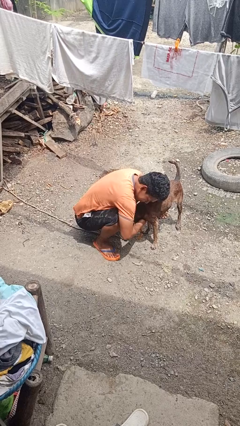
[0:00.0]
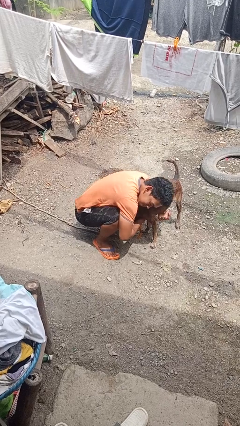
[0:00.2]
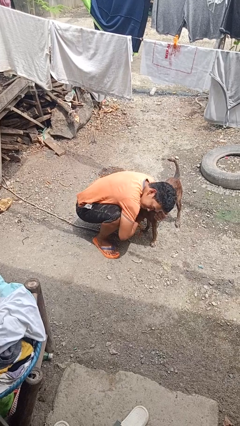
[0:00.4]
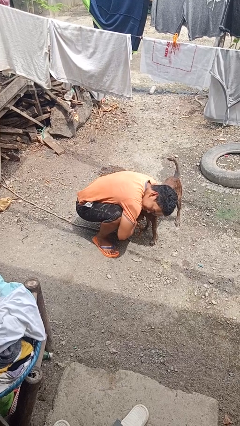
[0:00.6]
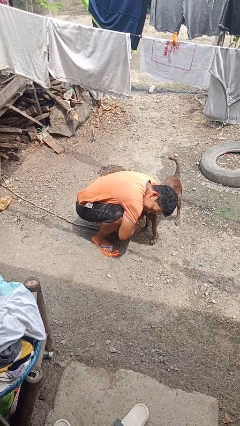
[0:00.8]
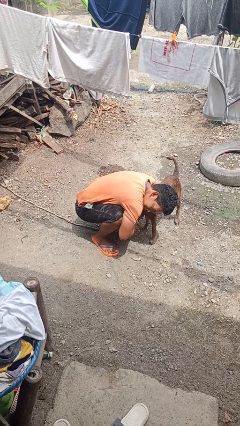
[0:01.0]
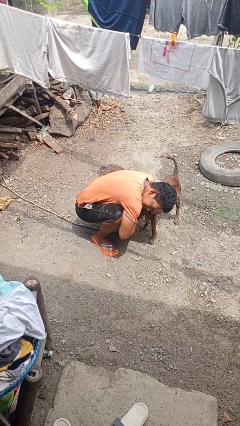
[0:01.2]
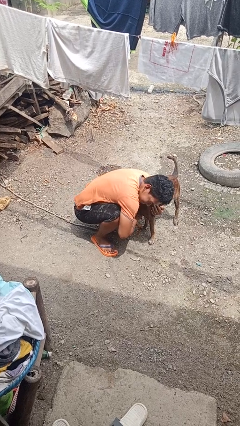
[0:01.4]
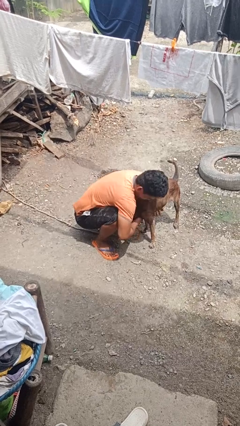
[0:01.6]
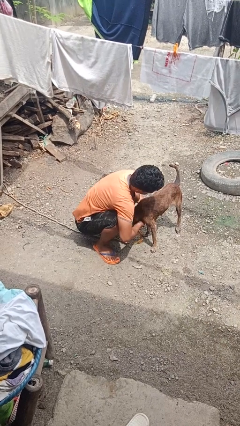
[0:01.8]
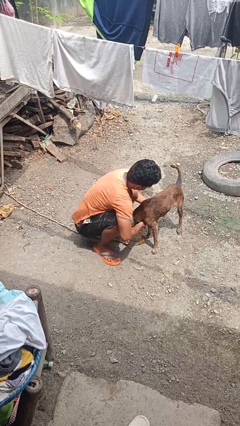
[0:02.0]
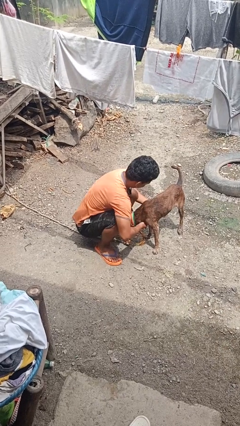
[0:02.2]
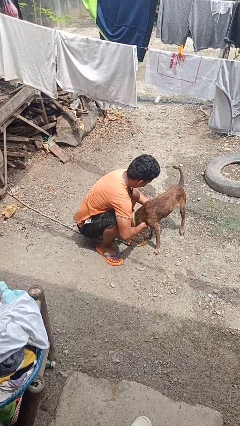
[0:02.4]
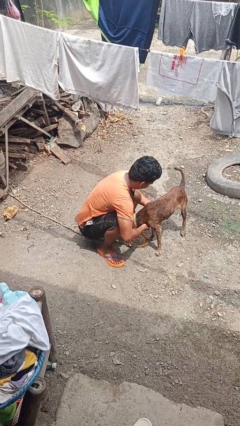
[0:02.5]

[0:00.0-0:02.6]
person hugs dog

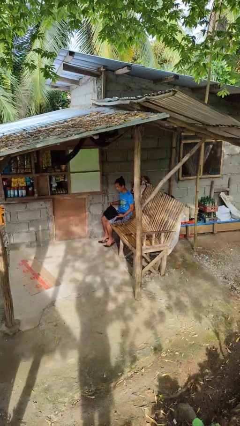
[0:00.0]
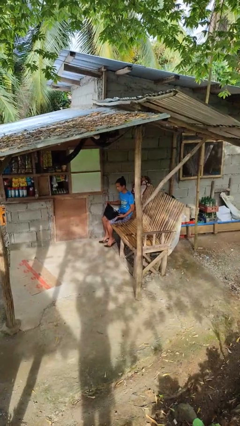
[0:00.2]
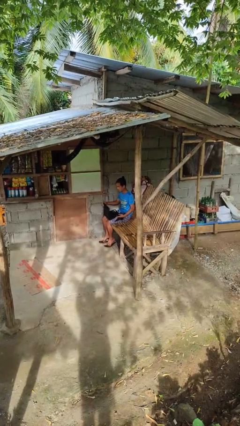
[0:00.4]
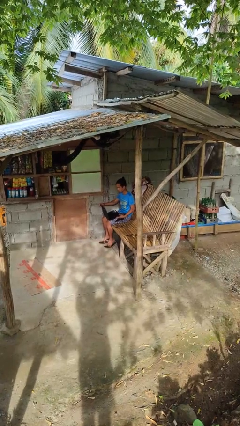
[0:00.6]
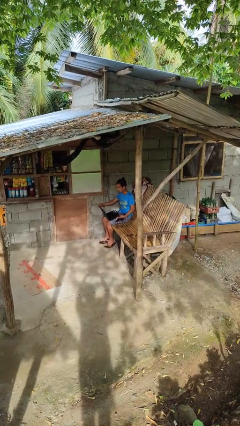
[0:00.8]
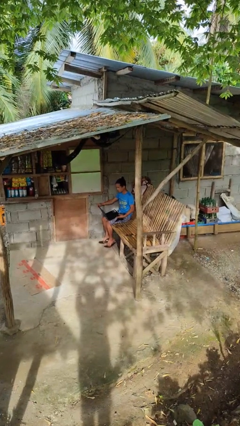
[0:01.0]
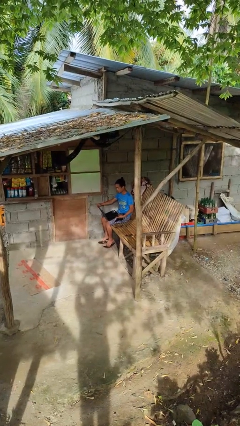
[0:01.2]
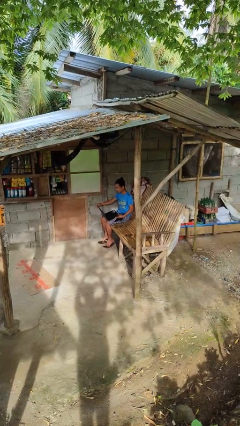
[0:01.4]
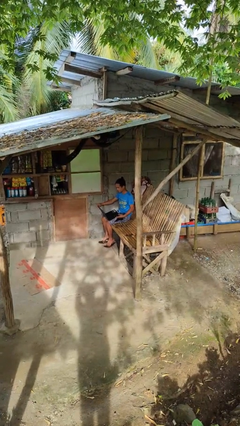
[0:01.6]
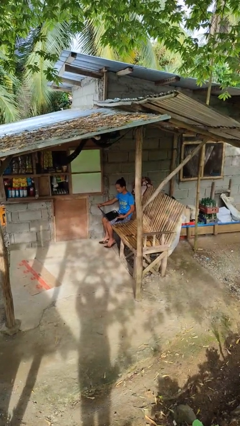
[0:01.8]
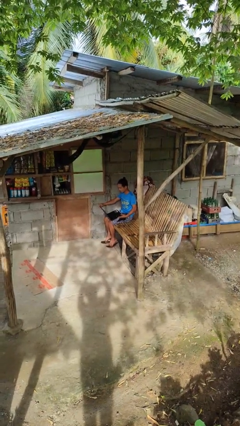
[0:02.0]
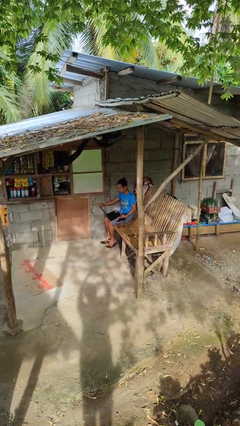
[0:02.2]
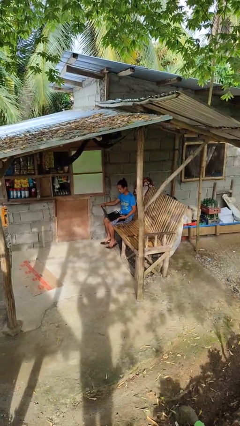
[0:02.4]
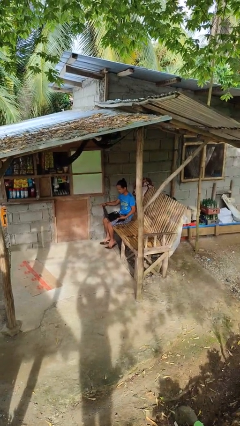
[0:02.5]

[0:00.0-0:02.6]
person opens laptop

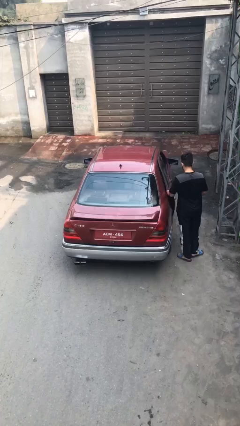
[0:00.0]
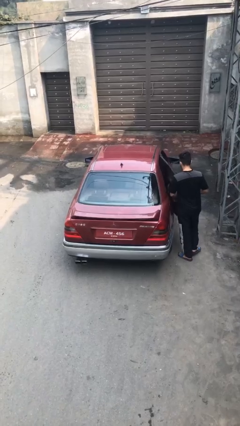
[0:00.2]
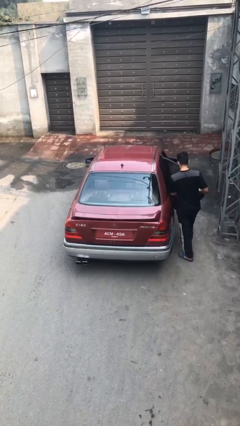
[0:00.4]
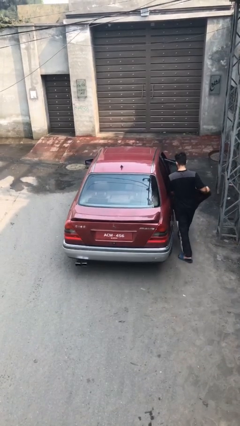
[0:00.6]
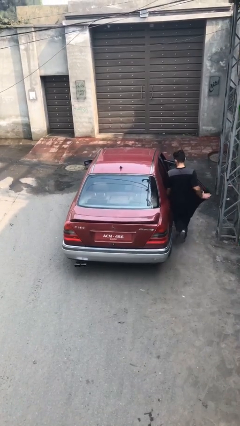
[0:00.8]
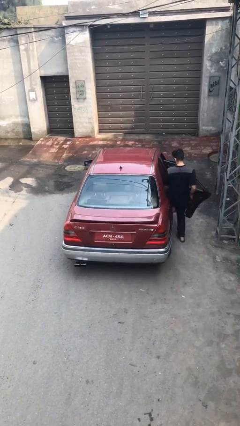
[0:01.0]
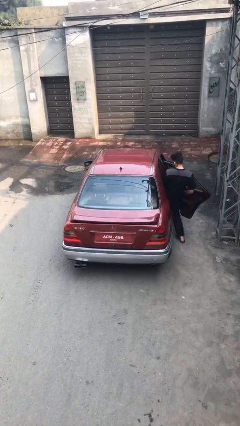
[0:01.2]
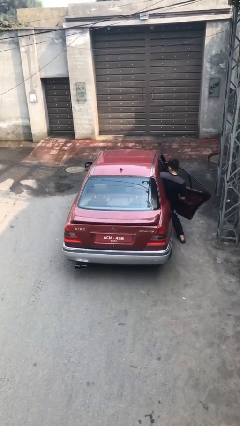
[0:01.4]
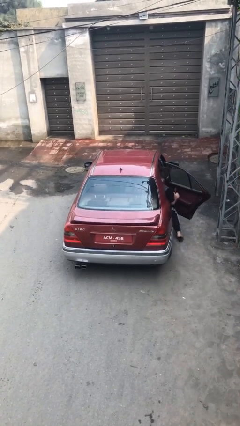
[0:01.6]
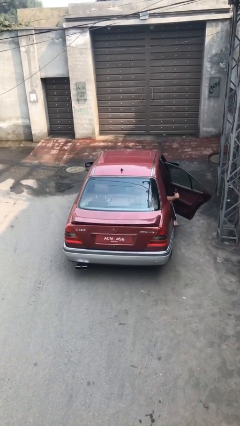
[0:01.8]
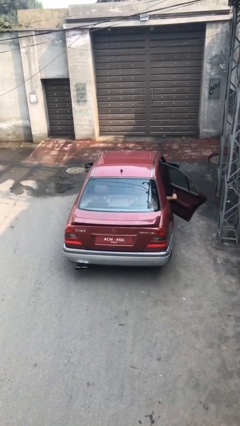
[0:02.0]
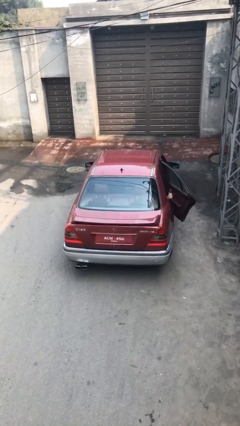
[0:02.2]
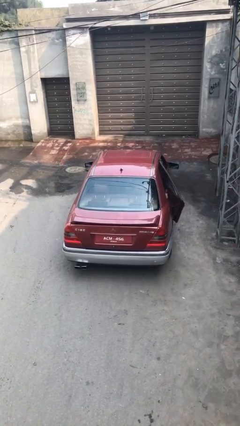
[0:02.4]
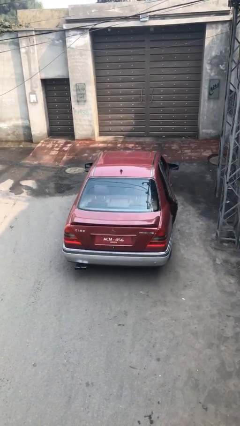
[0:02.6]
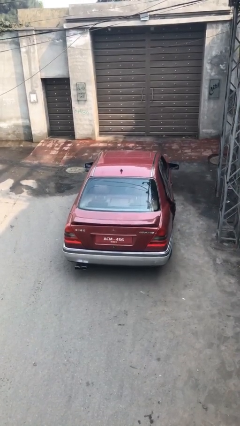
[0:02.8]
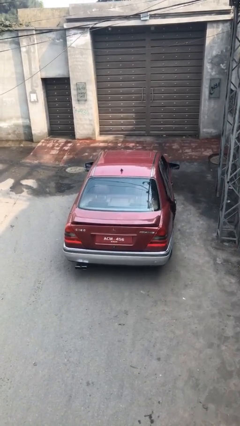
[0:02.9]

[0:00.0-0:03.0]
car picks up person

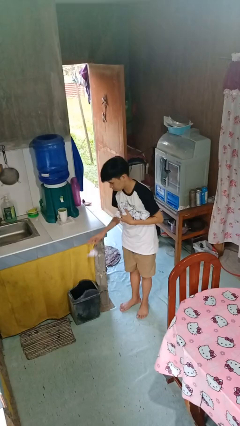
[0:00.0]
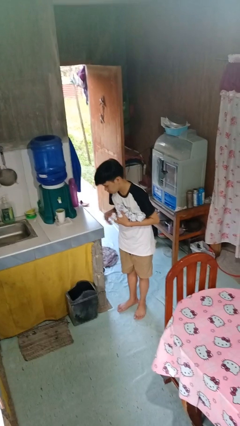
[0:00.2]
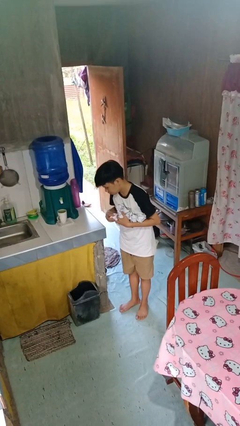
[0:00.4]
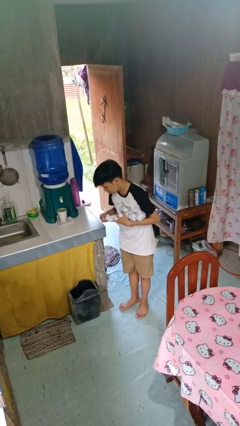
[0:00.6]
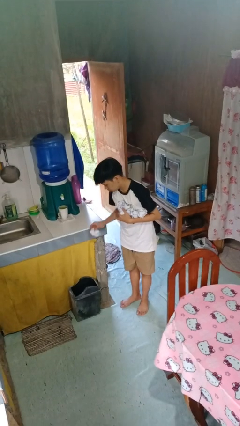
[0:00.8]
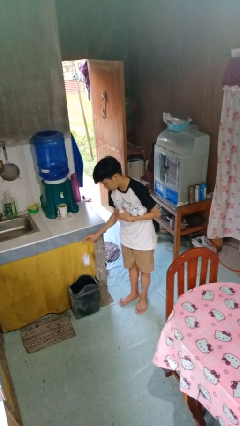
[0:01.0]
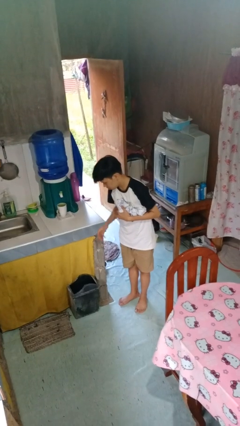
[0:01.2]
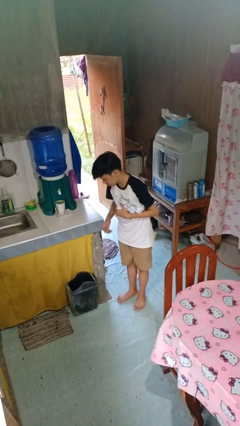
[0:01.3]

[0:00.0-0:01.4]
person discards trash

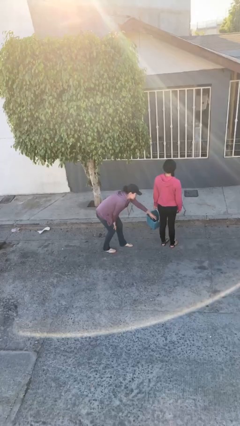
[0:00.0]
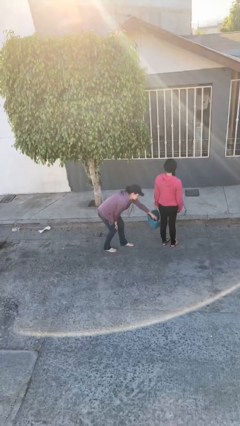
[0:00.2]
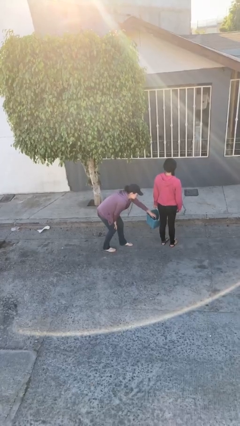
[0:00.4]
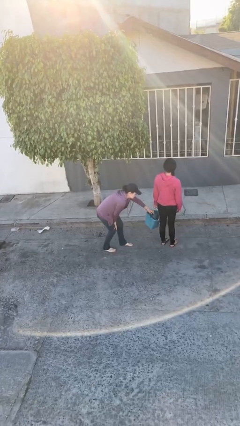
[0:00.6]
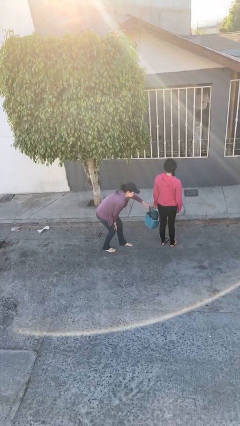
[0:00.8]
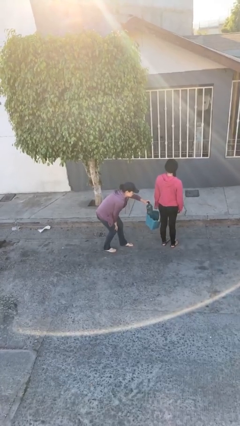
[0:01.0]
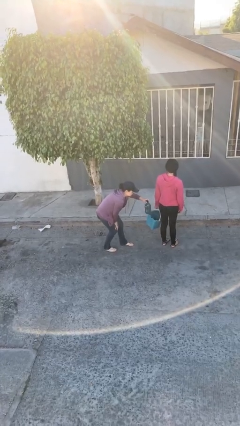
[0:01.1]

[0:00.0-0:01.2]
person steals object from person

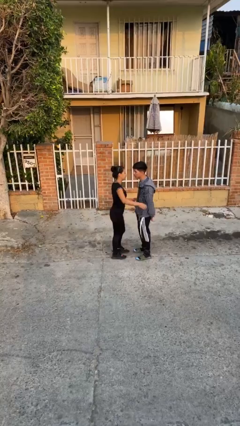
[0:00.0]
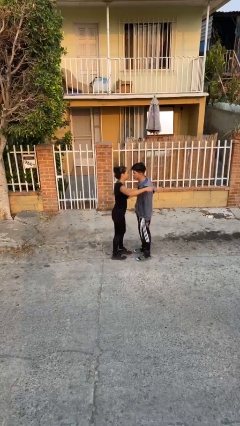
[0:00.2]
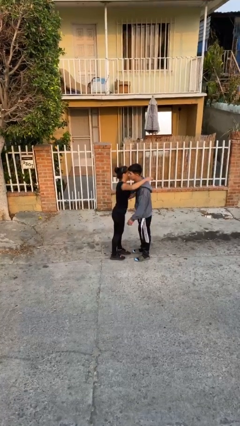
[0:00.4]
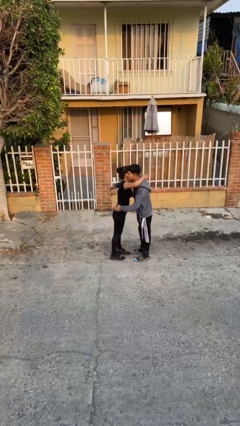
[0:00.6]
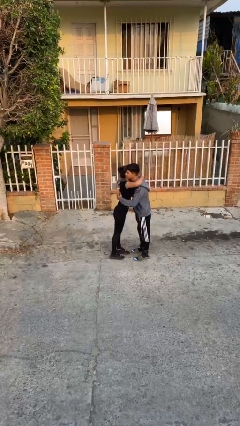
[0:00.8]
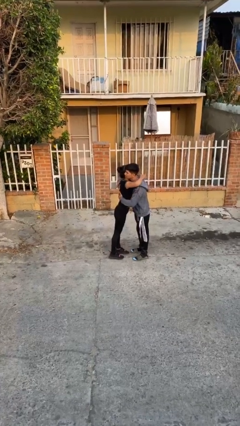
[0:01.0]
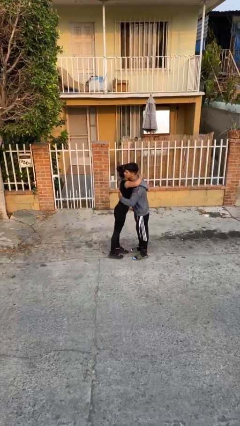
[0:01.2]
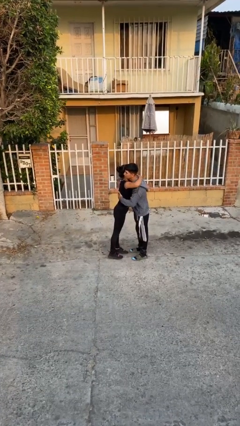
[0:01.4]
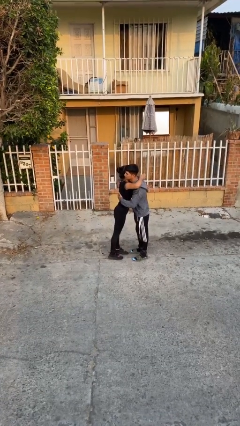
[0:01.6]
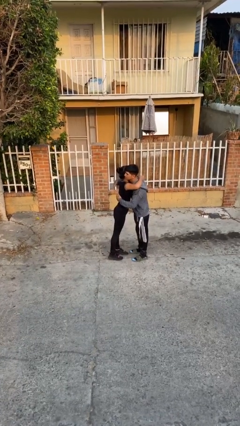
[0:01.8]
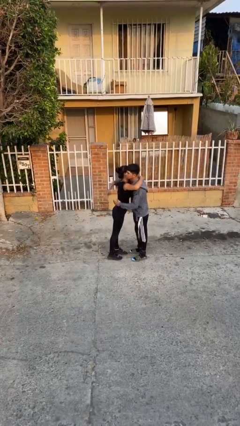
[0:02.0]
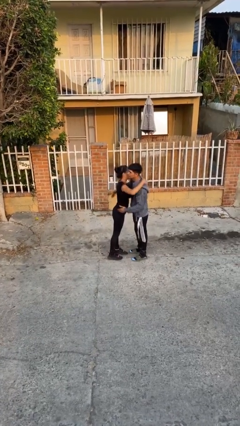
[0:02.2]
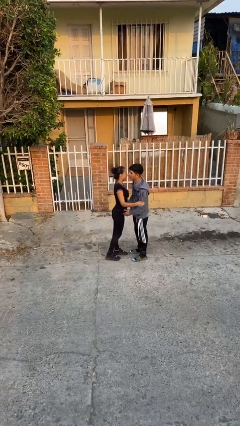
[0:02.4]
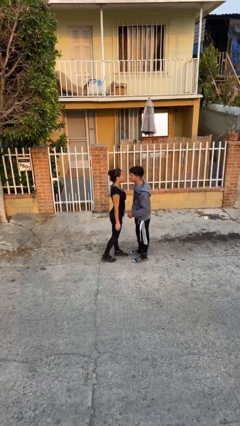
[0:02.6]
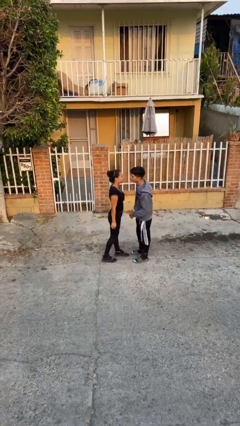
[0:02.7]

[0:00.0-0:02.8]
person embraces person

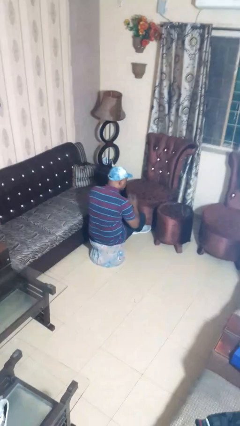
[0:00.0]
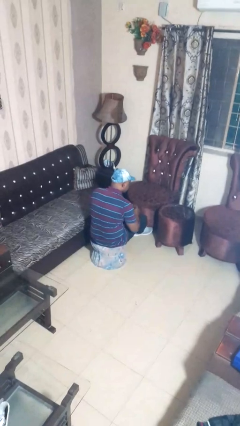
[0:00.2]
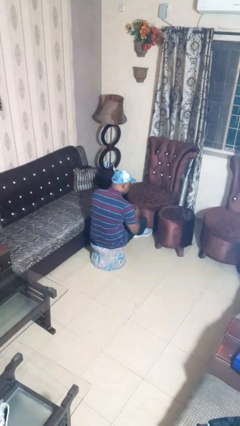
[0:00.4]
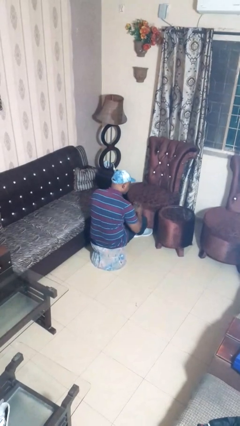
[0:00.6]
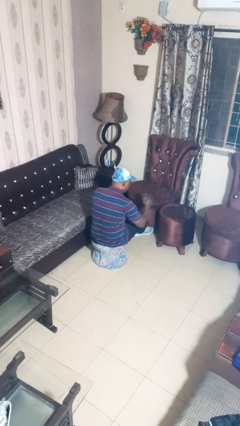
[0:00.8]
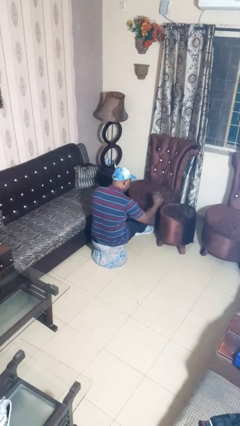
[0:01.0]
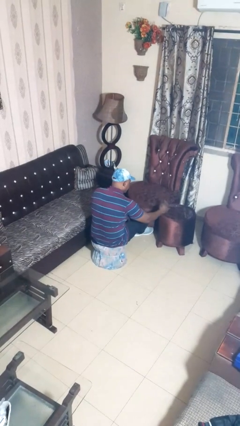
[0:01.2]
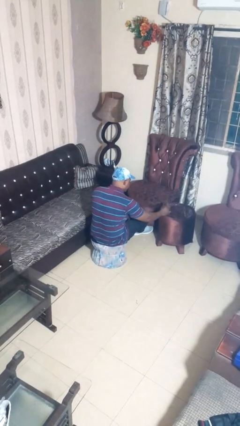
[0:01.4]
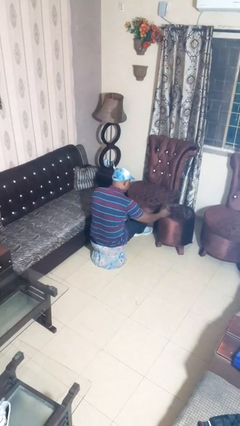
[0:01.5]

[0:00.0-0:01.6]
person puts down object on table

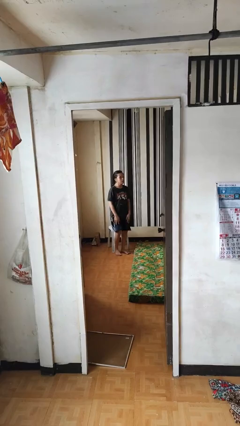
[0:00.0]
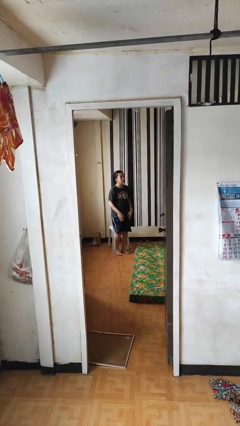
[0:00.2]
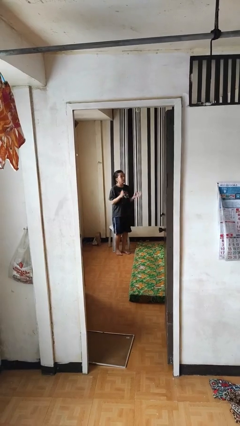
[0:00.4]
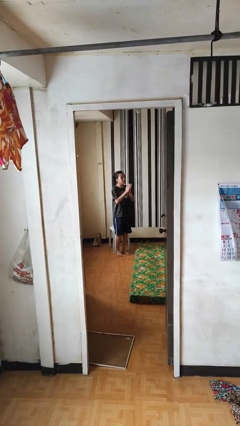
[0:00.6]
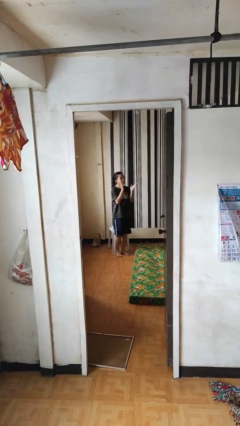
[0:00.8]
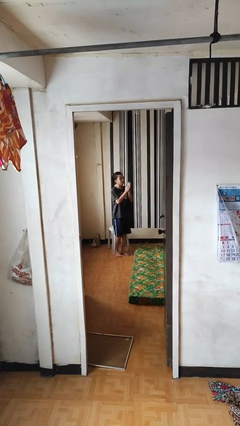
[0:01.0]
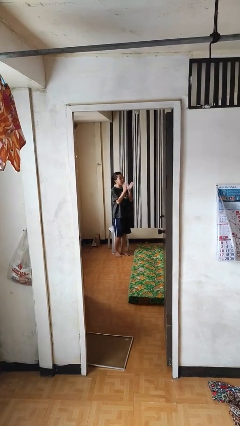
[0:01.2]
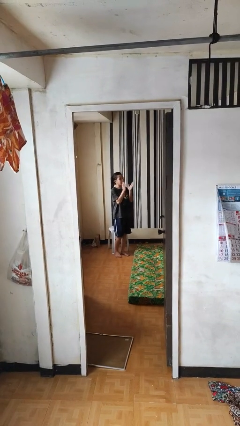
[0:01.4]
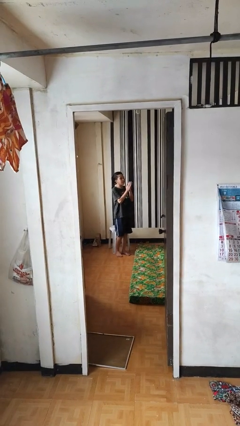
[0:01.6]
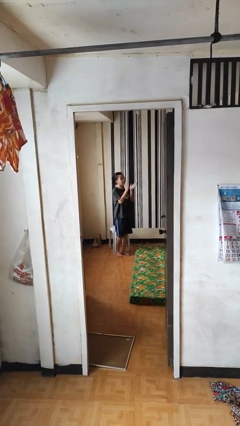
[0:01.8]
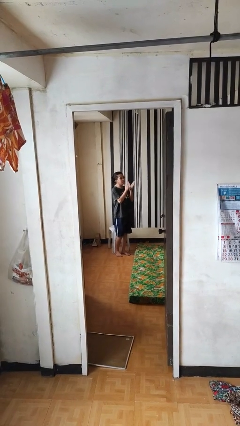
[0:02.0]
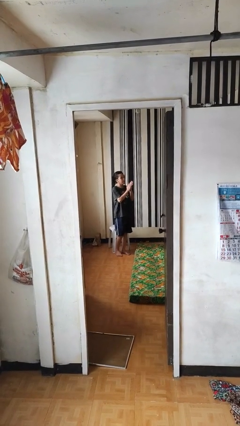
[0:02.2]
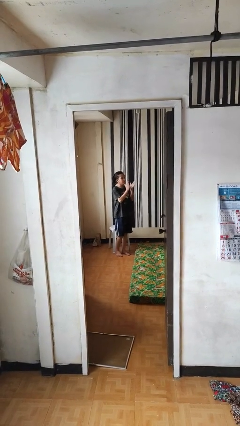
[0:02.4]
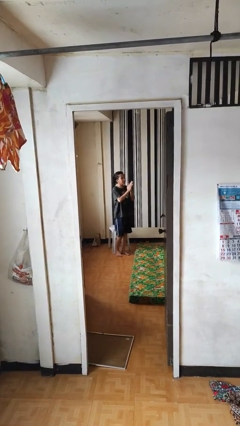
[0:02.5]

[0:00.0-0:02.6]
person claps hands
